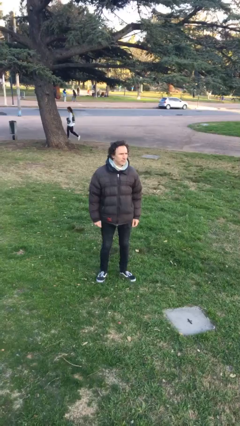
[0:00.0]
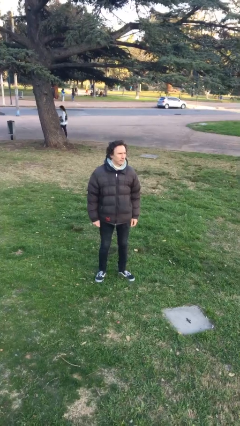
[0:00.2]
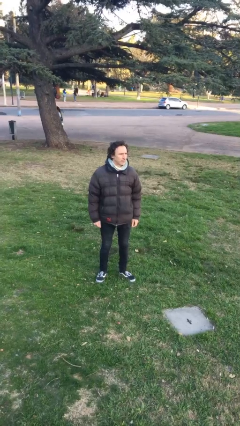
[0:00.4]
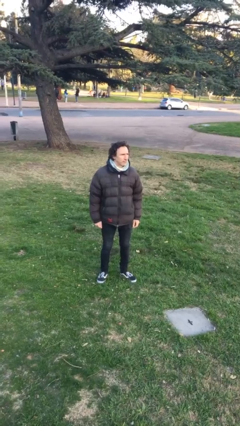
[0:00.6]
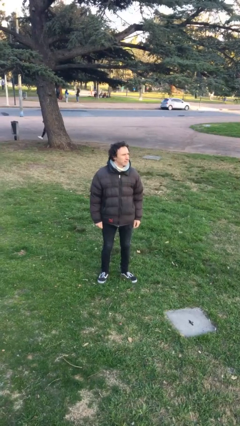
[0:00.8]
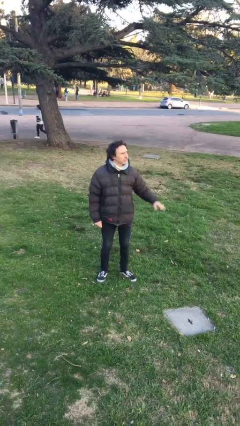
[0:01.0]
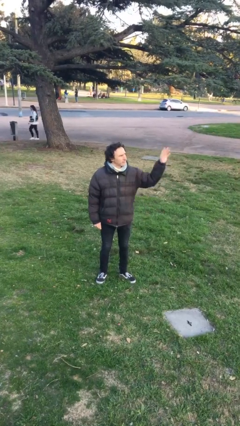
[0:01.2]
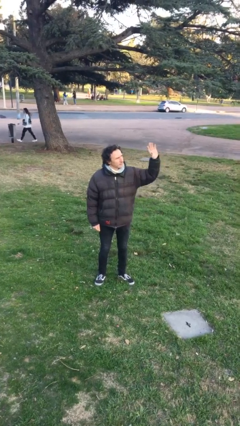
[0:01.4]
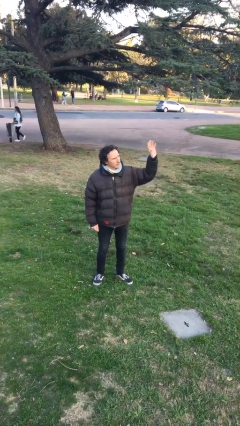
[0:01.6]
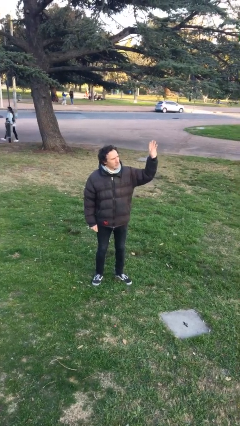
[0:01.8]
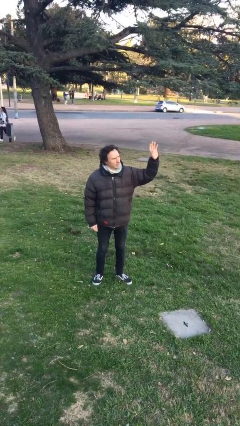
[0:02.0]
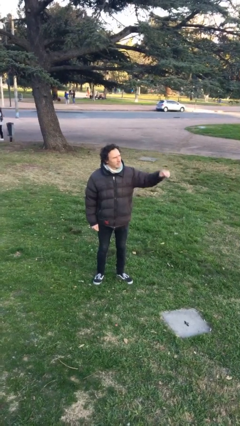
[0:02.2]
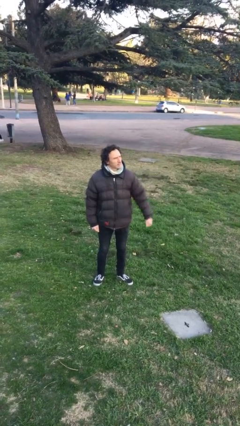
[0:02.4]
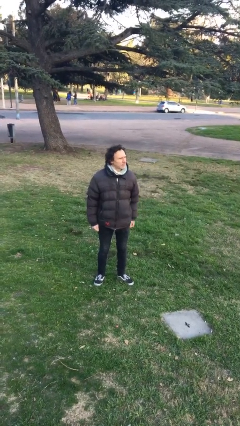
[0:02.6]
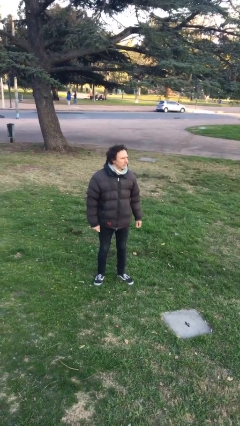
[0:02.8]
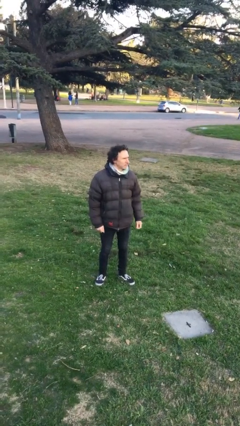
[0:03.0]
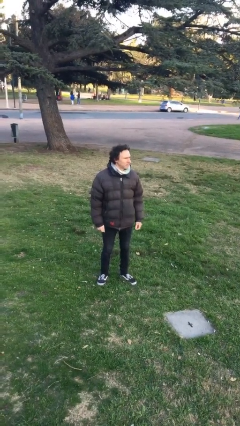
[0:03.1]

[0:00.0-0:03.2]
person waves at person

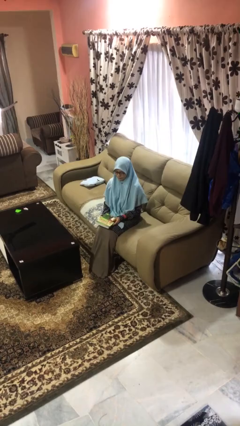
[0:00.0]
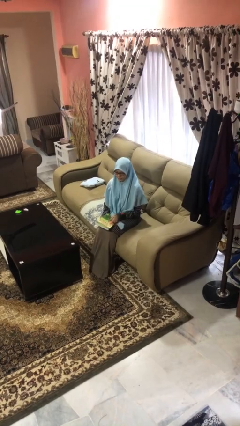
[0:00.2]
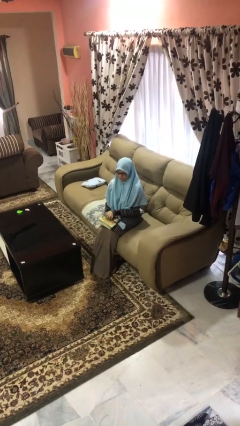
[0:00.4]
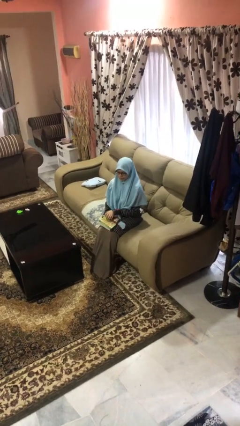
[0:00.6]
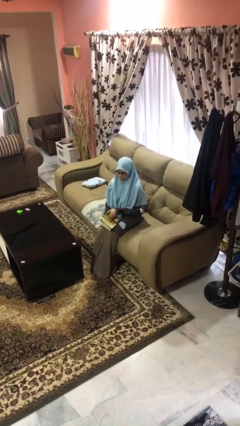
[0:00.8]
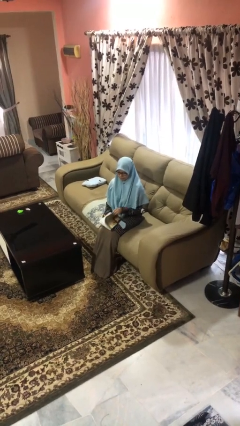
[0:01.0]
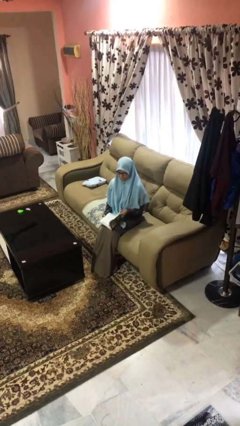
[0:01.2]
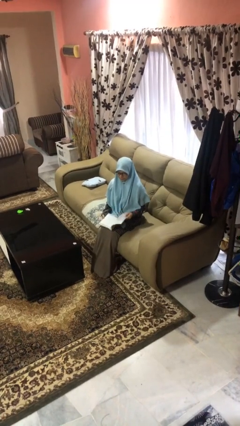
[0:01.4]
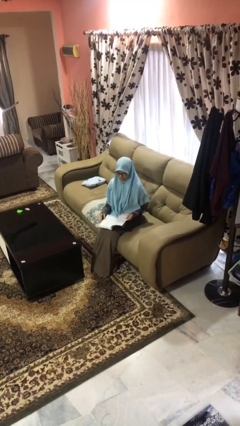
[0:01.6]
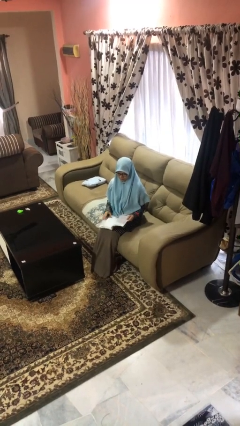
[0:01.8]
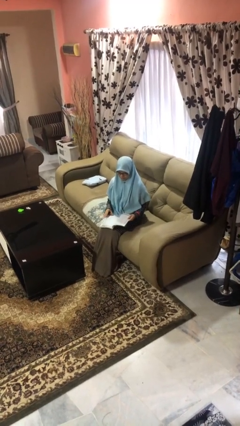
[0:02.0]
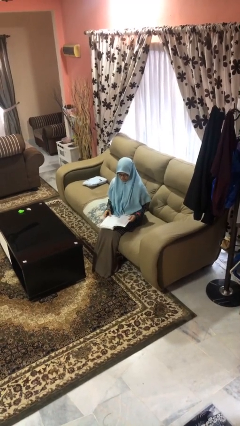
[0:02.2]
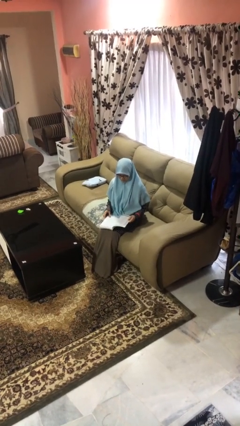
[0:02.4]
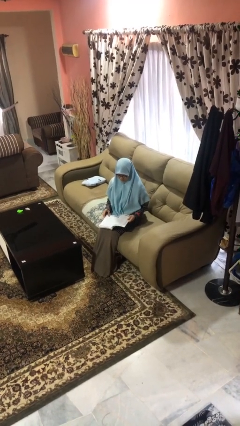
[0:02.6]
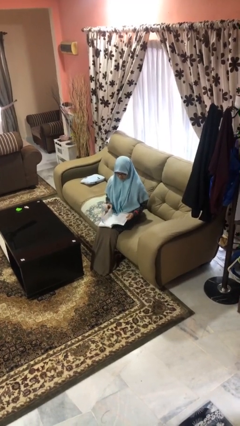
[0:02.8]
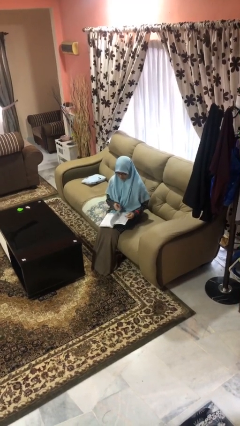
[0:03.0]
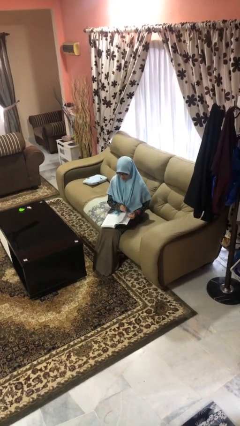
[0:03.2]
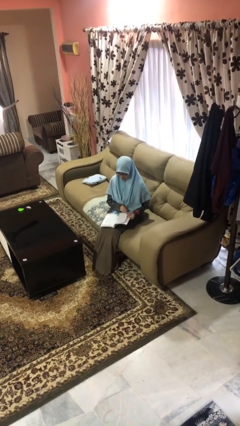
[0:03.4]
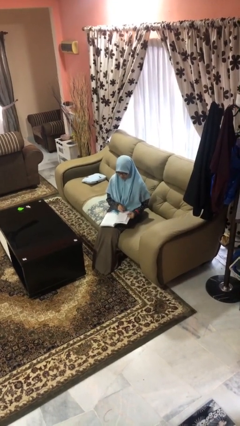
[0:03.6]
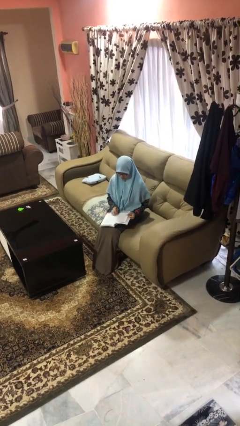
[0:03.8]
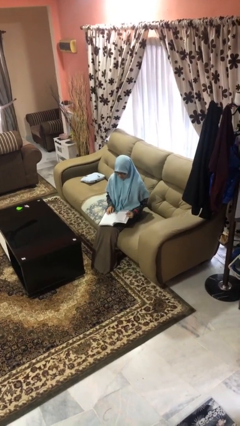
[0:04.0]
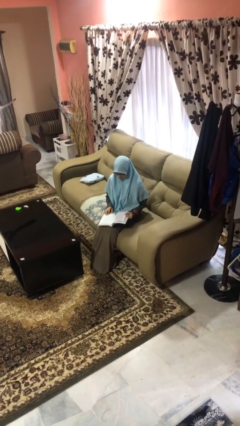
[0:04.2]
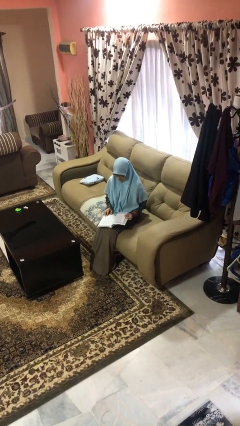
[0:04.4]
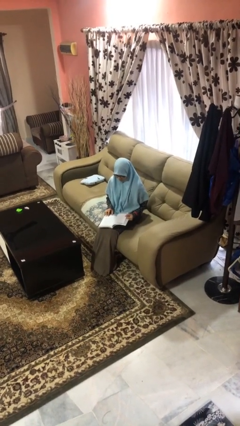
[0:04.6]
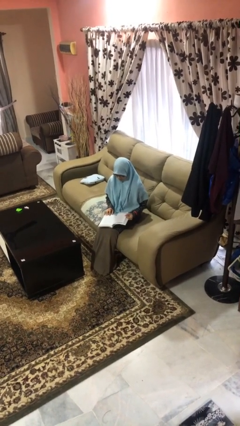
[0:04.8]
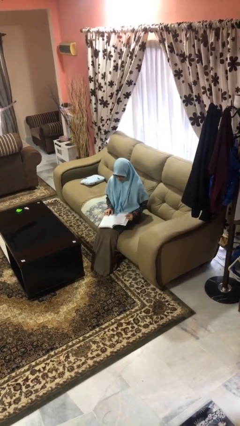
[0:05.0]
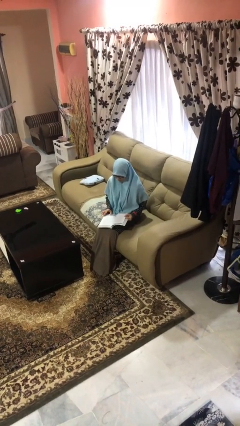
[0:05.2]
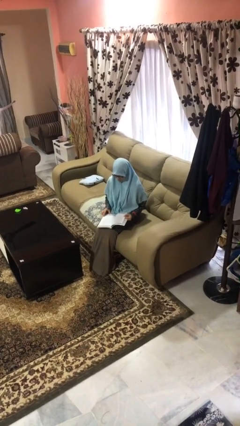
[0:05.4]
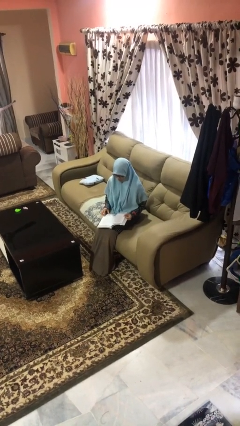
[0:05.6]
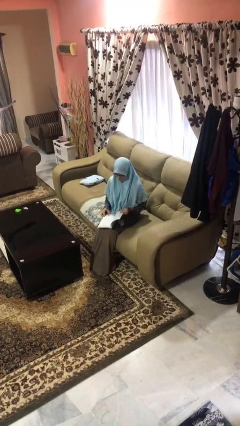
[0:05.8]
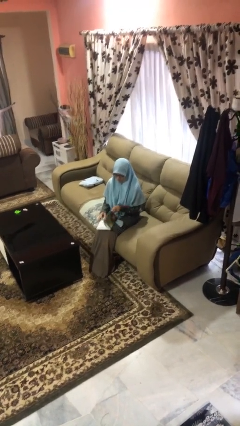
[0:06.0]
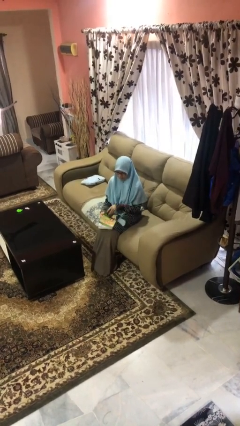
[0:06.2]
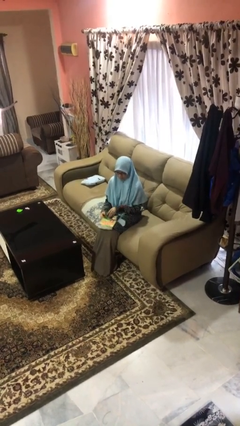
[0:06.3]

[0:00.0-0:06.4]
person reads magazine

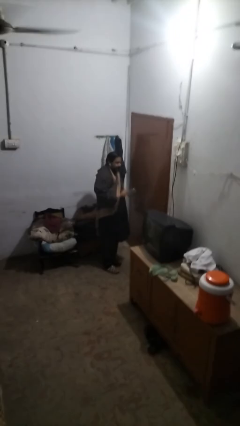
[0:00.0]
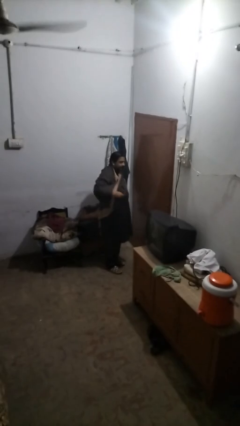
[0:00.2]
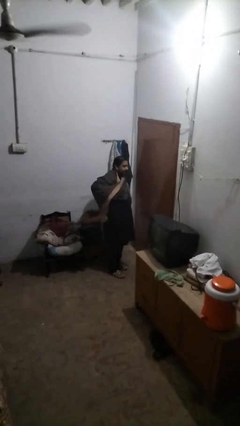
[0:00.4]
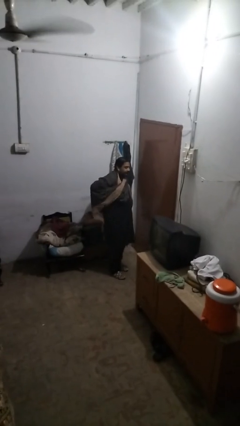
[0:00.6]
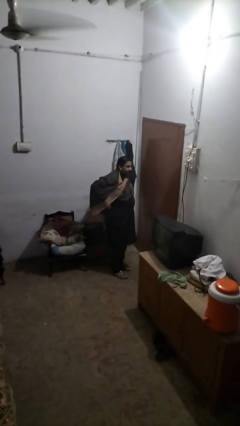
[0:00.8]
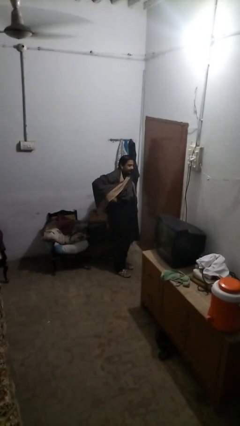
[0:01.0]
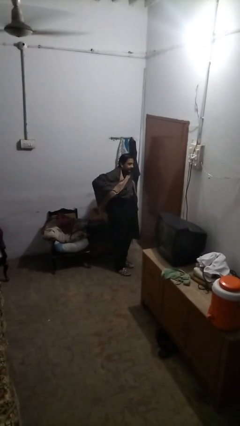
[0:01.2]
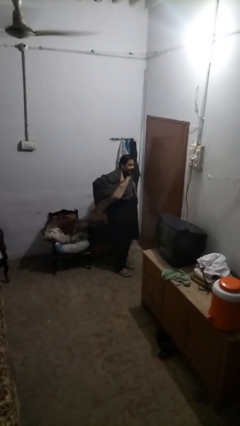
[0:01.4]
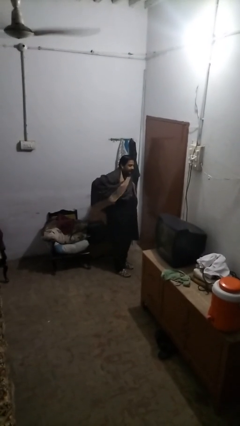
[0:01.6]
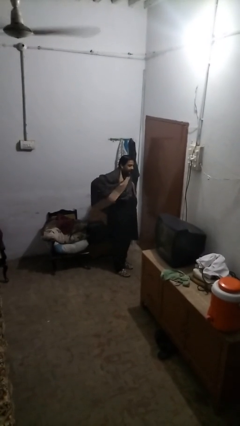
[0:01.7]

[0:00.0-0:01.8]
person puts phone into pocket

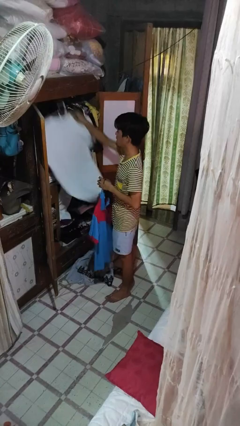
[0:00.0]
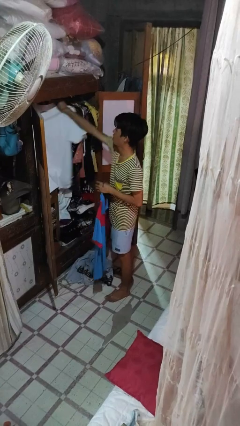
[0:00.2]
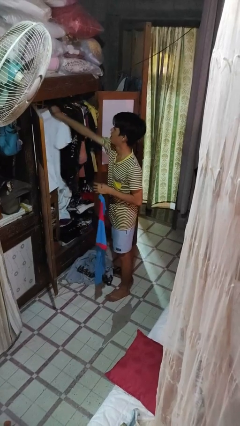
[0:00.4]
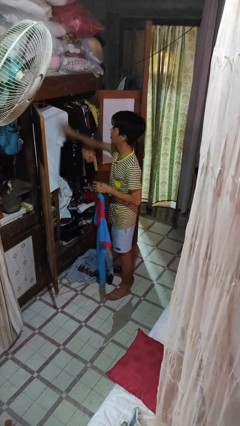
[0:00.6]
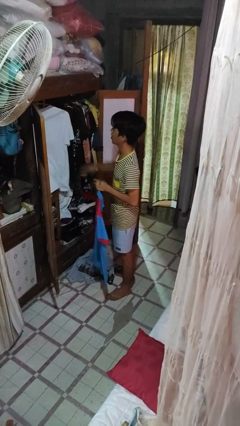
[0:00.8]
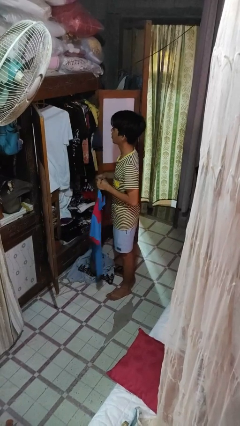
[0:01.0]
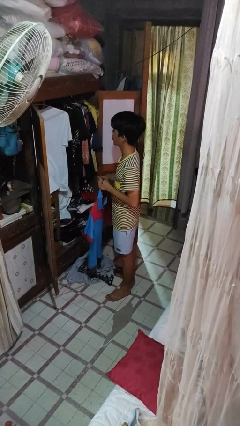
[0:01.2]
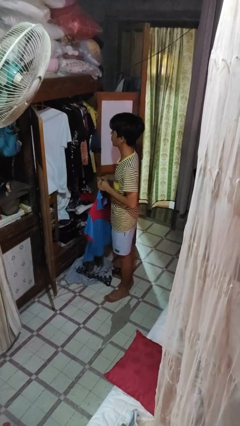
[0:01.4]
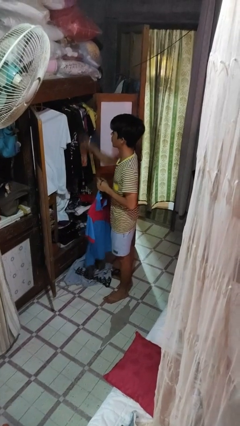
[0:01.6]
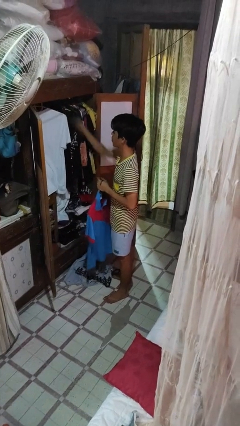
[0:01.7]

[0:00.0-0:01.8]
person puts clothes into closet

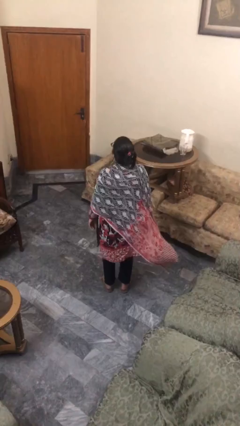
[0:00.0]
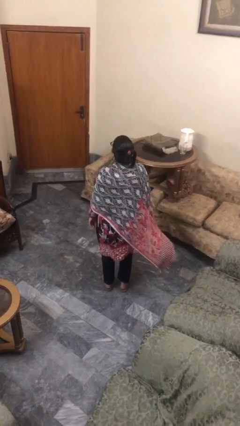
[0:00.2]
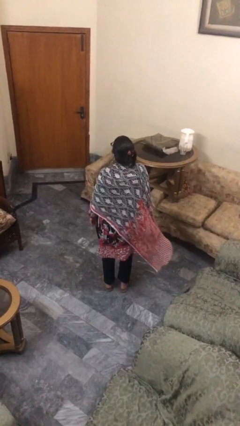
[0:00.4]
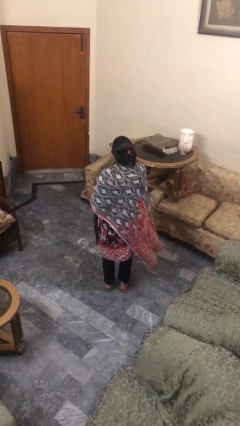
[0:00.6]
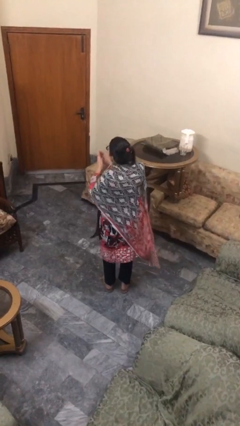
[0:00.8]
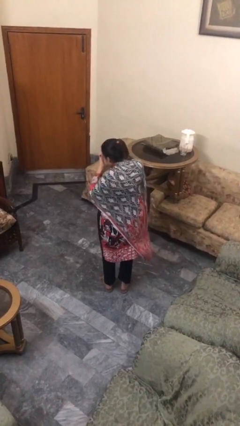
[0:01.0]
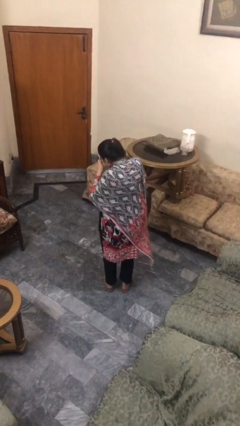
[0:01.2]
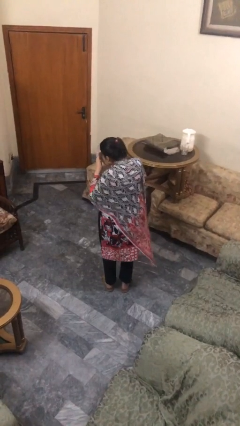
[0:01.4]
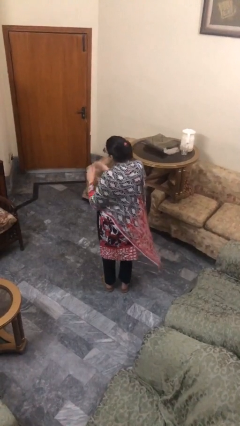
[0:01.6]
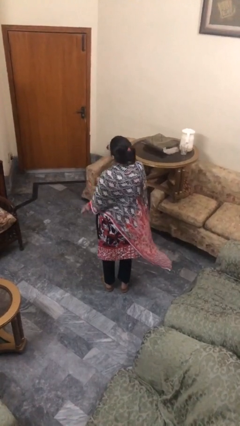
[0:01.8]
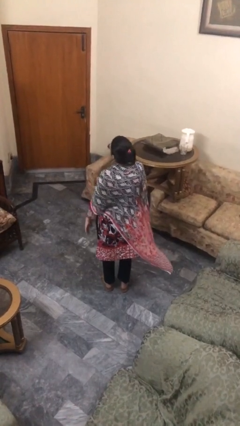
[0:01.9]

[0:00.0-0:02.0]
person sneezes into hand

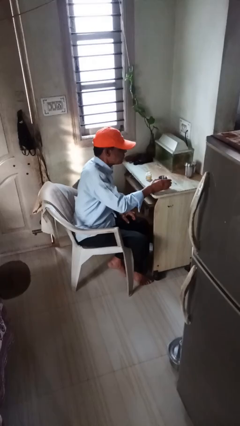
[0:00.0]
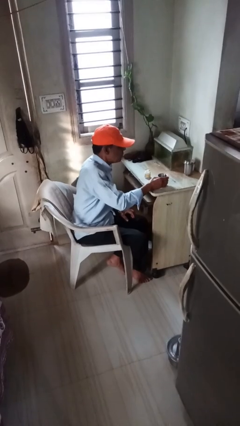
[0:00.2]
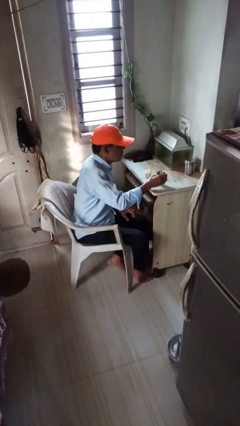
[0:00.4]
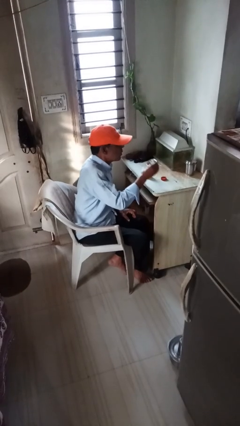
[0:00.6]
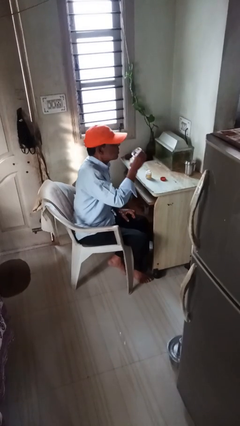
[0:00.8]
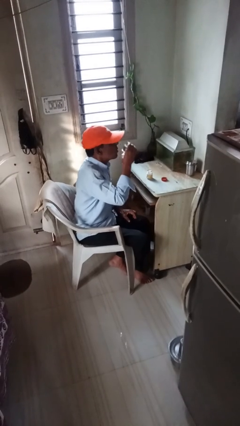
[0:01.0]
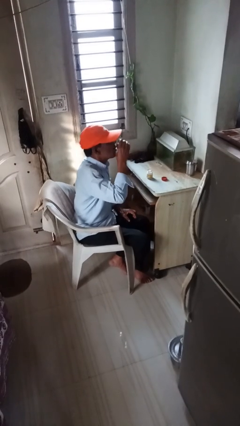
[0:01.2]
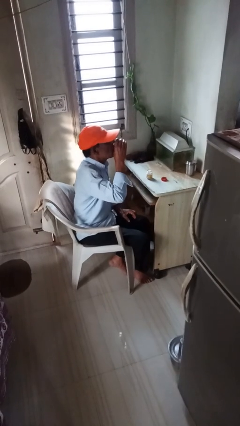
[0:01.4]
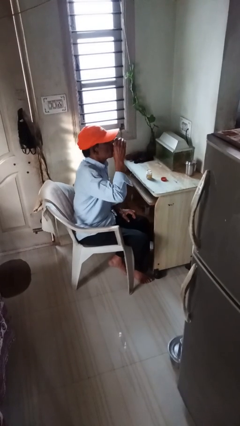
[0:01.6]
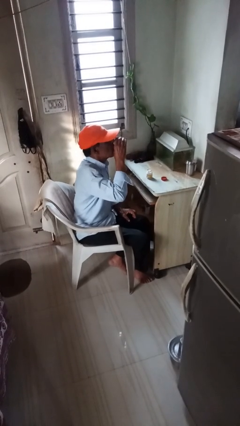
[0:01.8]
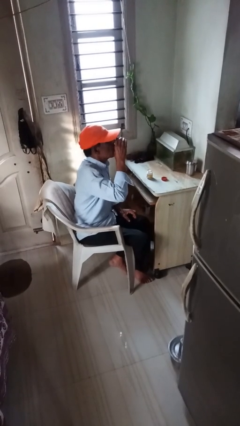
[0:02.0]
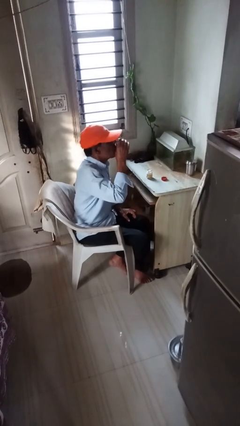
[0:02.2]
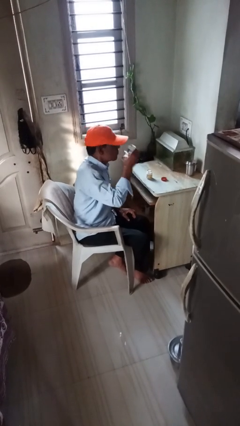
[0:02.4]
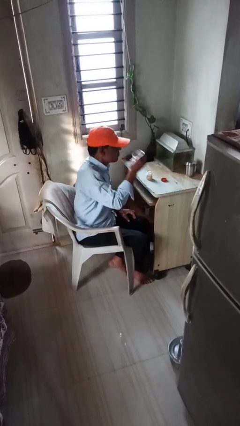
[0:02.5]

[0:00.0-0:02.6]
person drinks from cup
